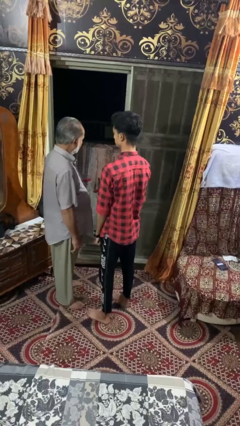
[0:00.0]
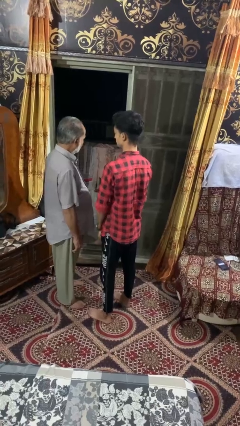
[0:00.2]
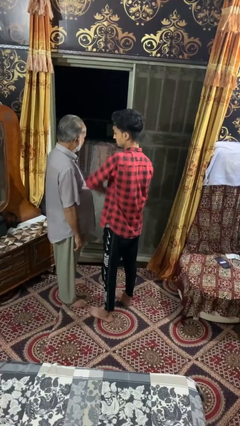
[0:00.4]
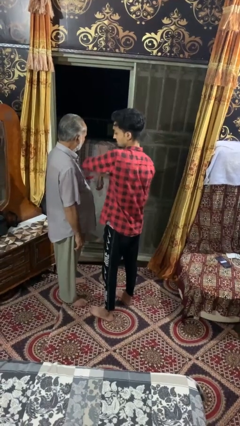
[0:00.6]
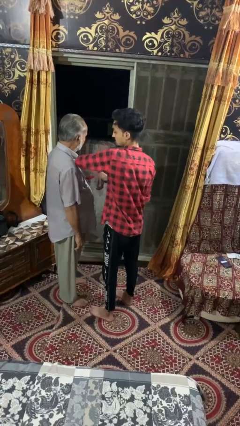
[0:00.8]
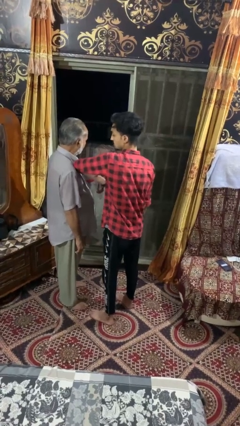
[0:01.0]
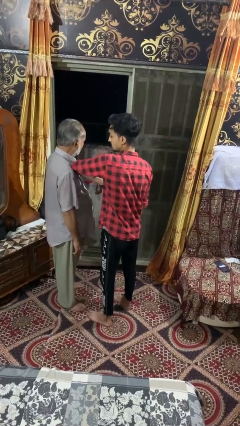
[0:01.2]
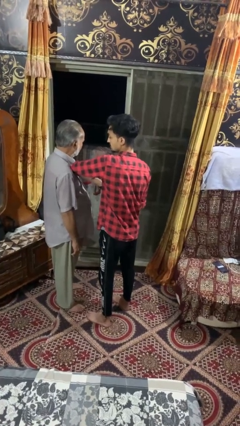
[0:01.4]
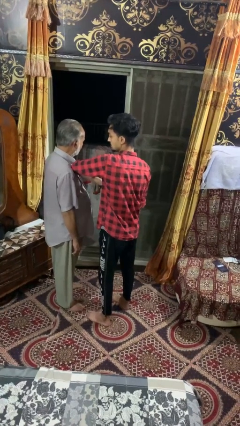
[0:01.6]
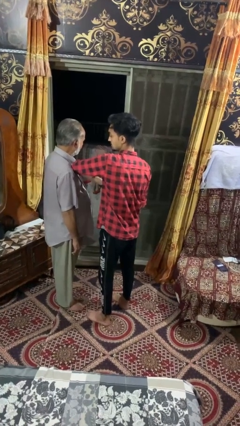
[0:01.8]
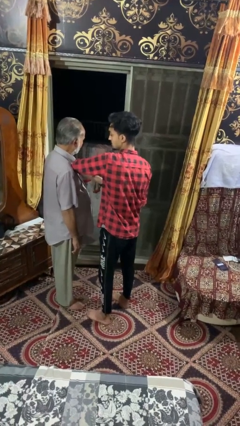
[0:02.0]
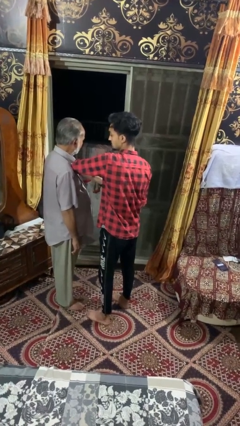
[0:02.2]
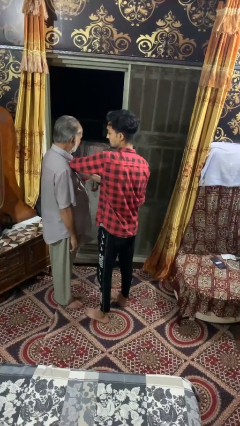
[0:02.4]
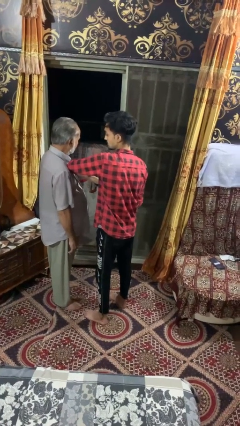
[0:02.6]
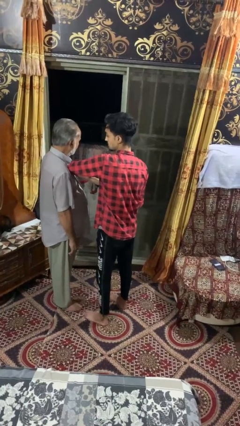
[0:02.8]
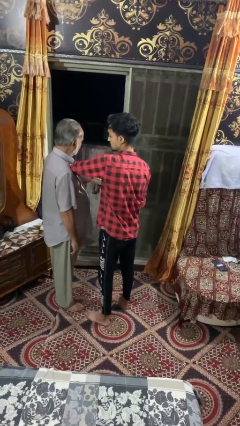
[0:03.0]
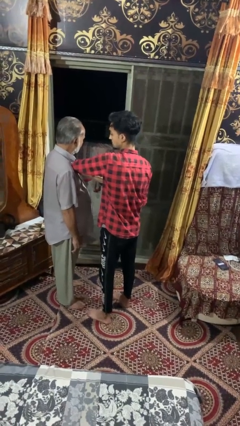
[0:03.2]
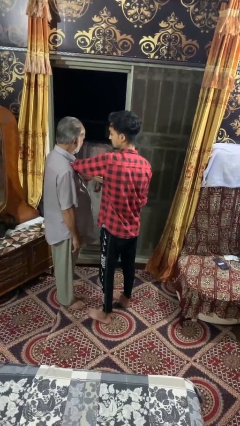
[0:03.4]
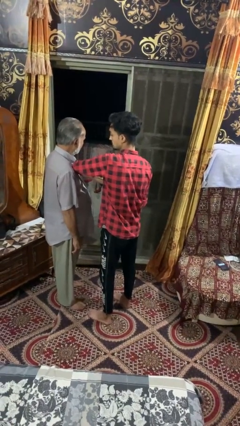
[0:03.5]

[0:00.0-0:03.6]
person nudges person with elbow

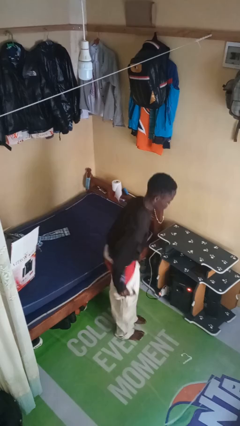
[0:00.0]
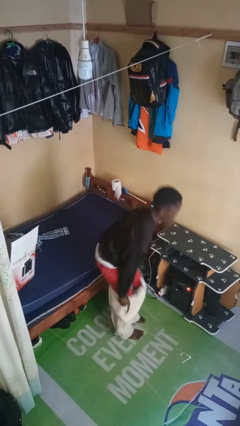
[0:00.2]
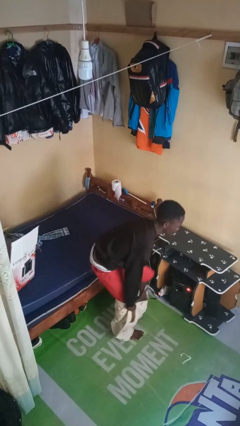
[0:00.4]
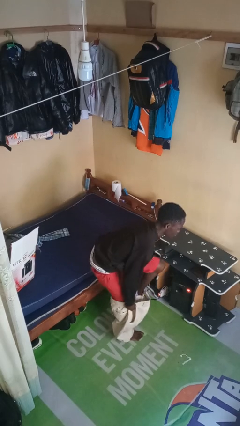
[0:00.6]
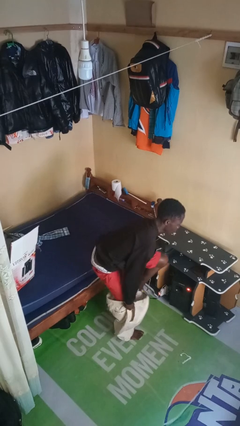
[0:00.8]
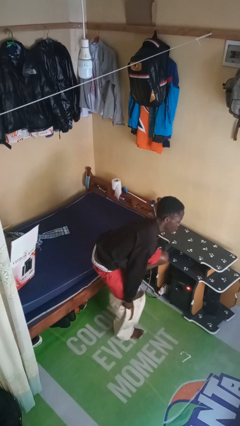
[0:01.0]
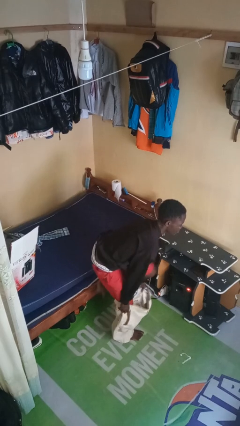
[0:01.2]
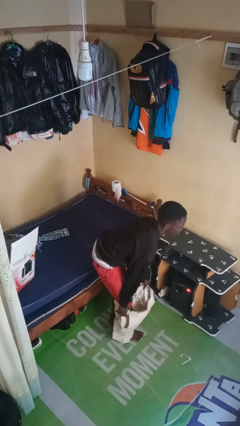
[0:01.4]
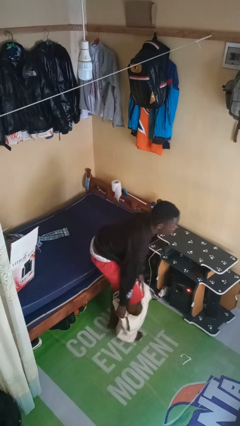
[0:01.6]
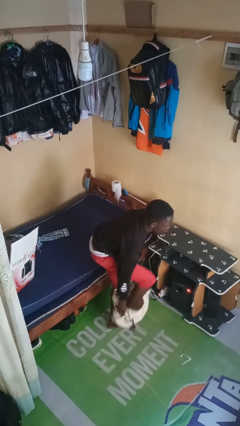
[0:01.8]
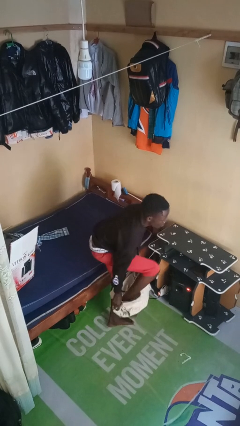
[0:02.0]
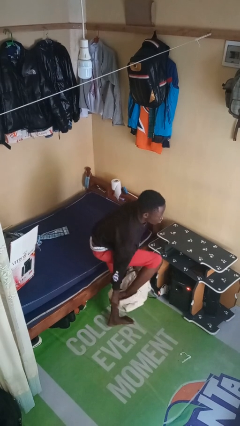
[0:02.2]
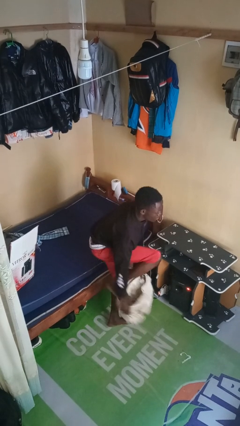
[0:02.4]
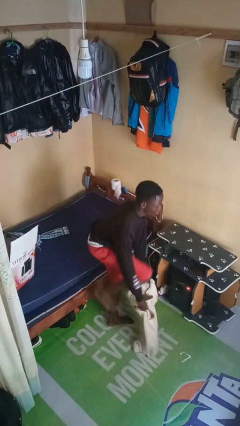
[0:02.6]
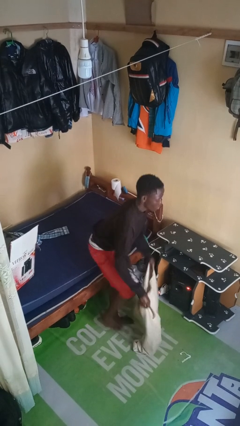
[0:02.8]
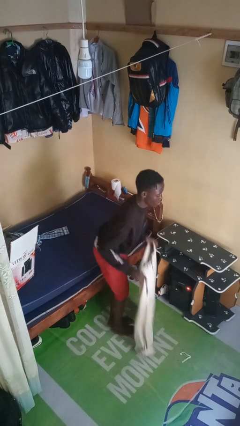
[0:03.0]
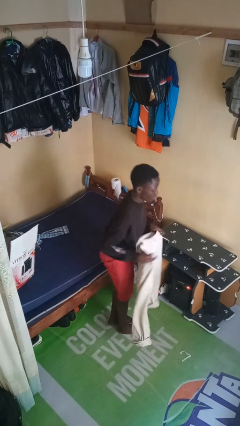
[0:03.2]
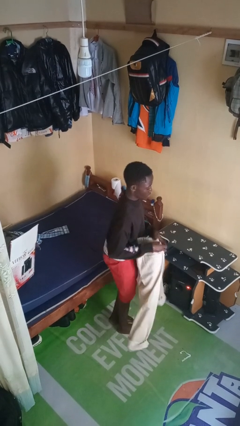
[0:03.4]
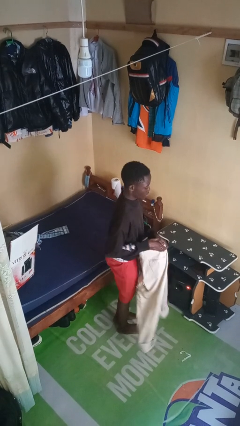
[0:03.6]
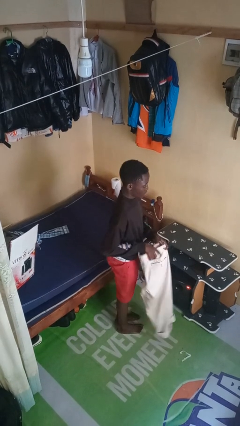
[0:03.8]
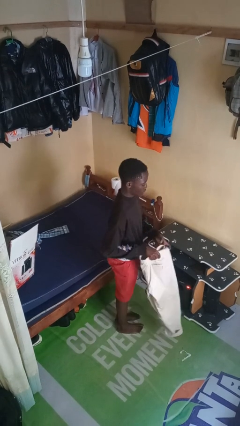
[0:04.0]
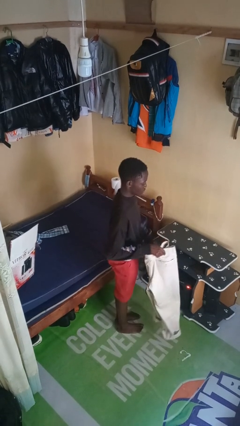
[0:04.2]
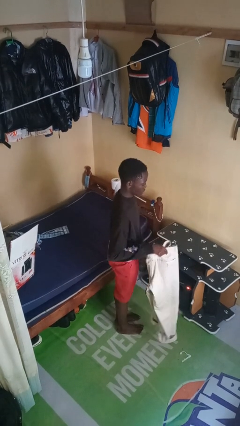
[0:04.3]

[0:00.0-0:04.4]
person takes off pants

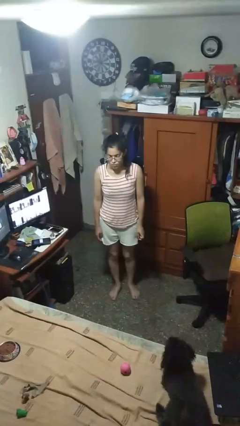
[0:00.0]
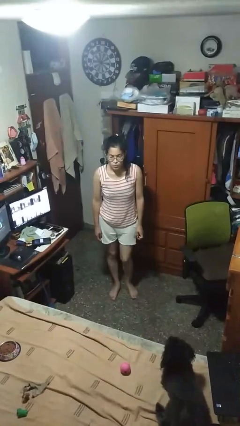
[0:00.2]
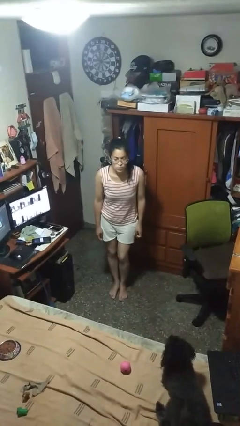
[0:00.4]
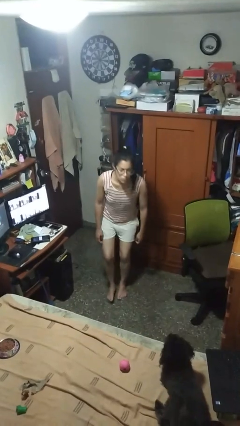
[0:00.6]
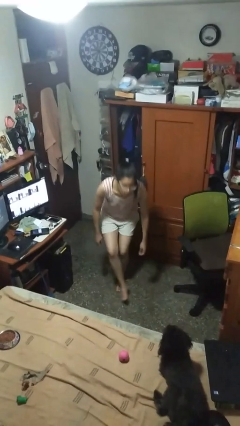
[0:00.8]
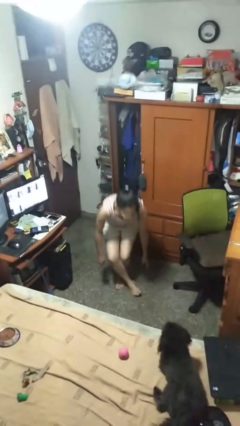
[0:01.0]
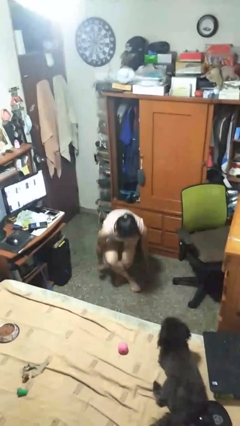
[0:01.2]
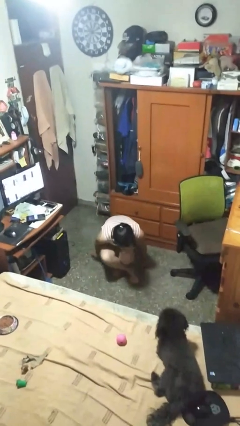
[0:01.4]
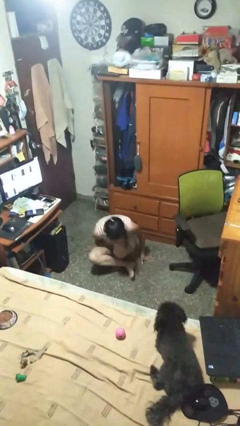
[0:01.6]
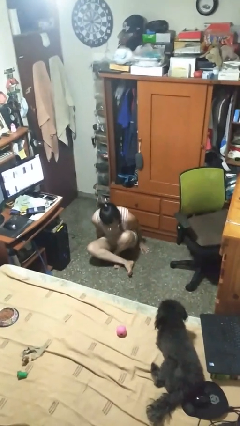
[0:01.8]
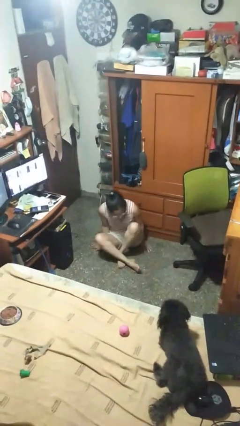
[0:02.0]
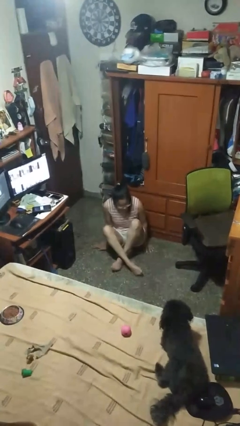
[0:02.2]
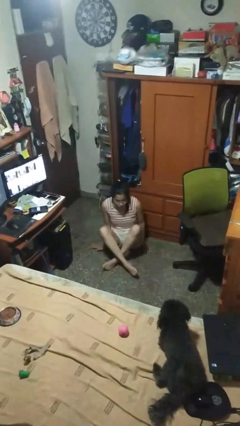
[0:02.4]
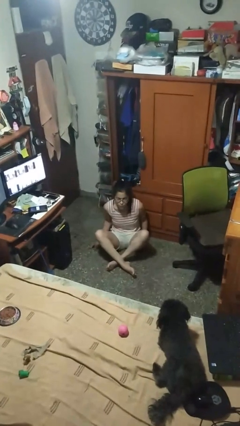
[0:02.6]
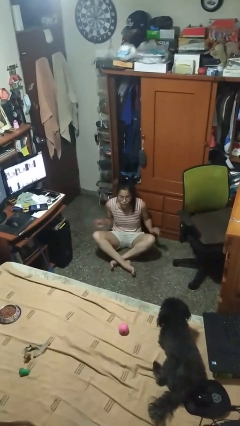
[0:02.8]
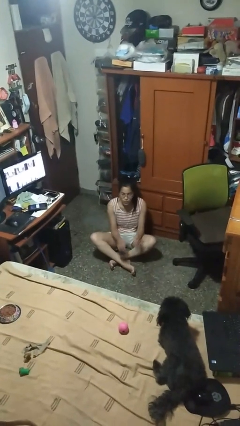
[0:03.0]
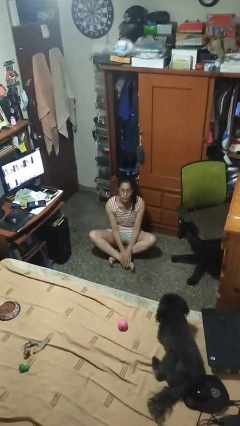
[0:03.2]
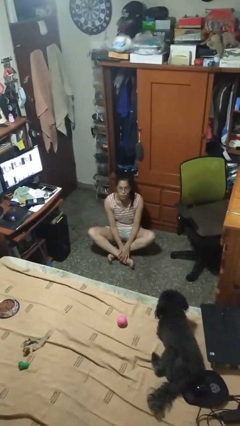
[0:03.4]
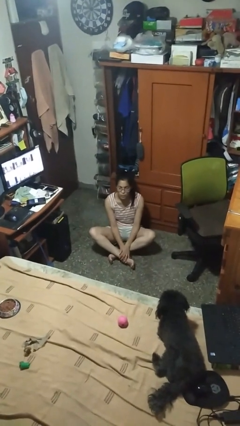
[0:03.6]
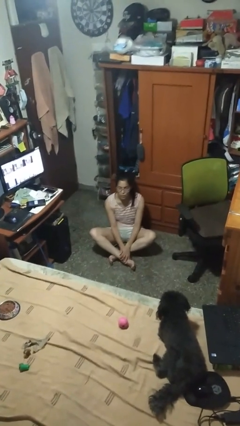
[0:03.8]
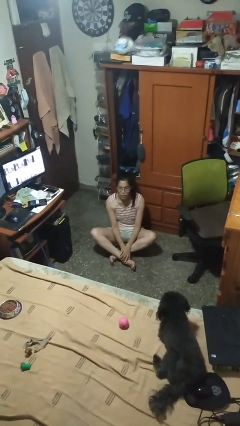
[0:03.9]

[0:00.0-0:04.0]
person sits crisscross

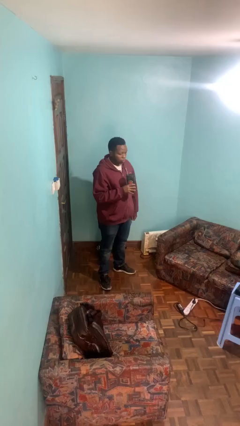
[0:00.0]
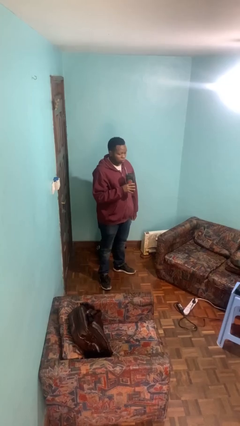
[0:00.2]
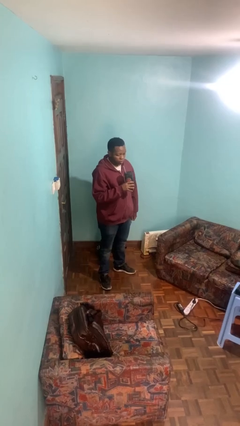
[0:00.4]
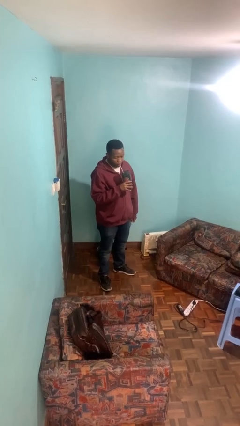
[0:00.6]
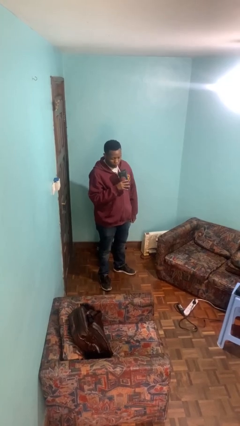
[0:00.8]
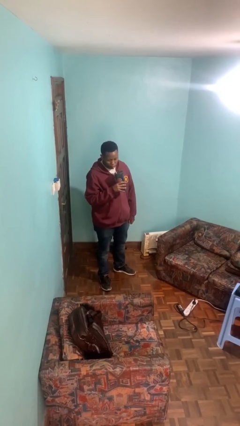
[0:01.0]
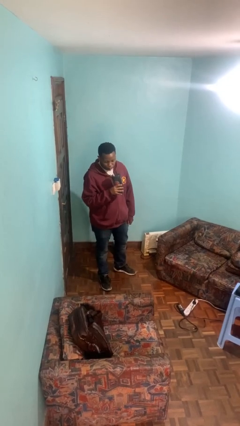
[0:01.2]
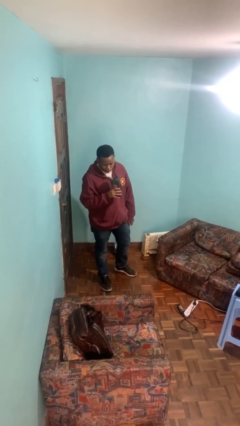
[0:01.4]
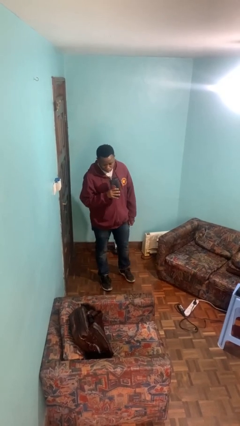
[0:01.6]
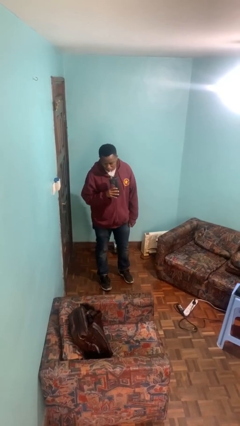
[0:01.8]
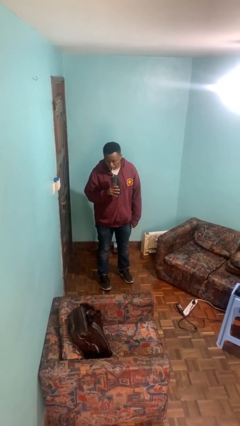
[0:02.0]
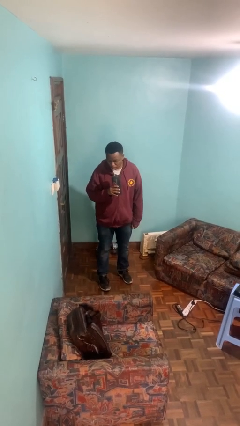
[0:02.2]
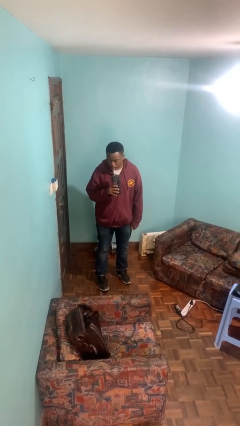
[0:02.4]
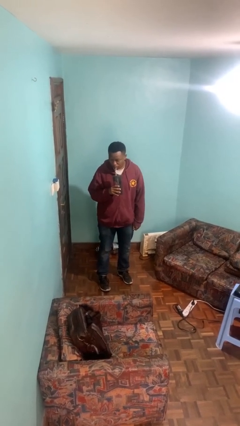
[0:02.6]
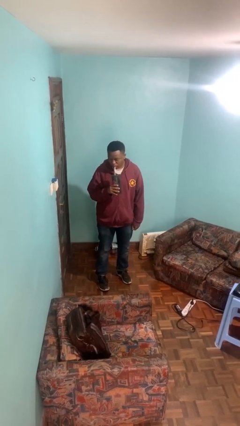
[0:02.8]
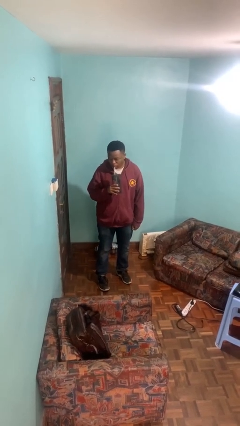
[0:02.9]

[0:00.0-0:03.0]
person drinks from straw

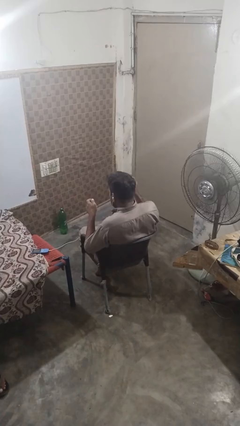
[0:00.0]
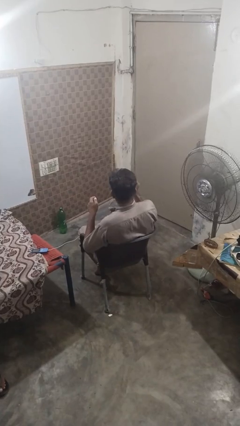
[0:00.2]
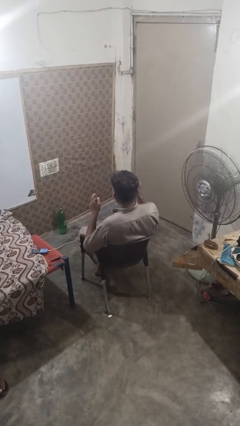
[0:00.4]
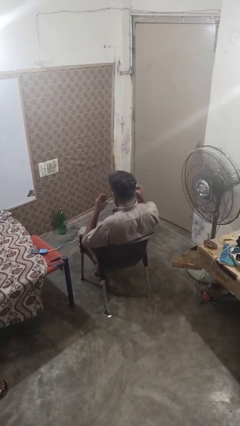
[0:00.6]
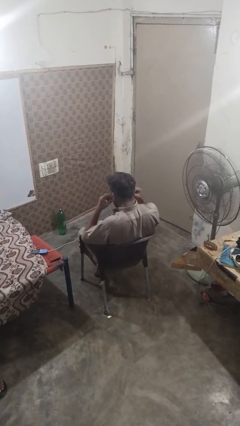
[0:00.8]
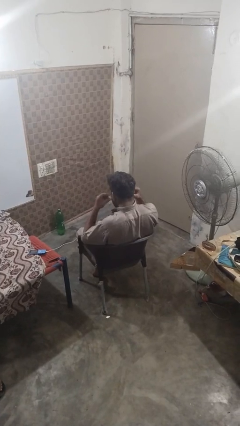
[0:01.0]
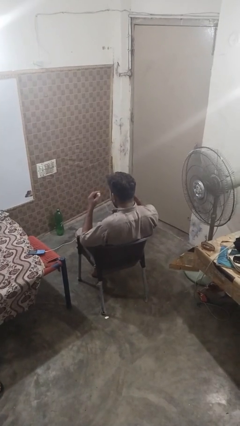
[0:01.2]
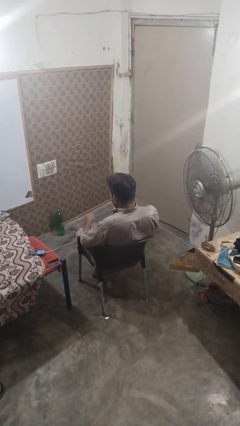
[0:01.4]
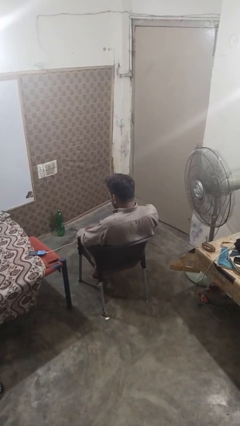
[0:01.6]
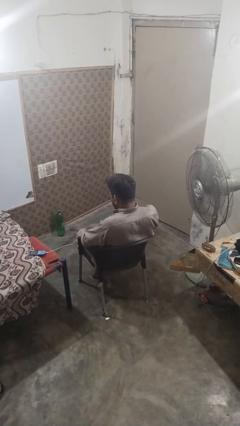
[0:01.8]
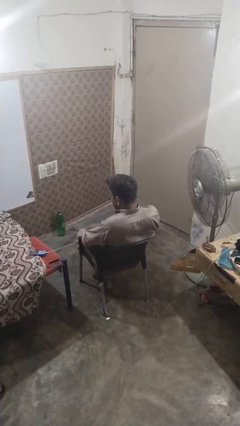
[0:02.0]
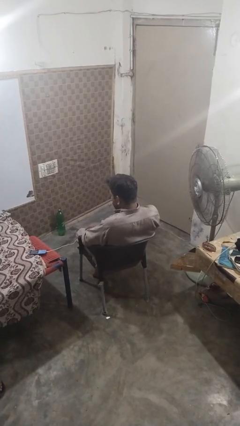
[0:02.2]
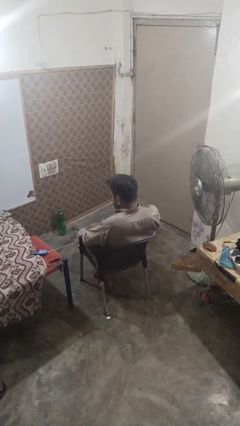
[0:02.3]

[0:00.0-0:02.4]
person takes off headphones

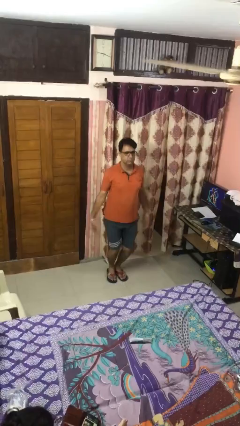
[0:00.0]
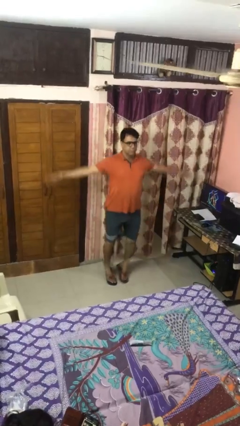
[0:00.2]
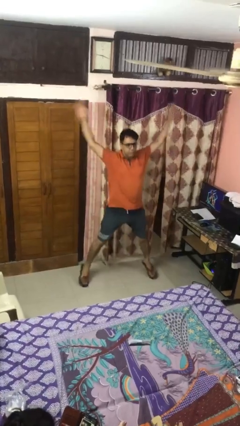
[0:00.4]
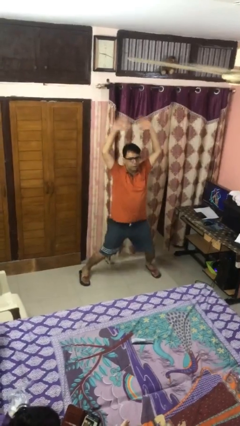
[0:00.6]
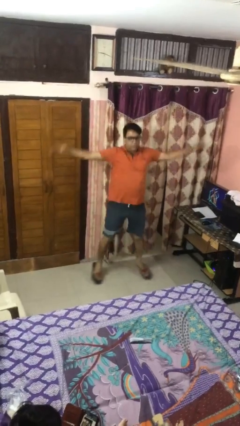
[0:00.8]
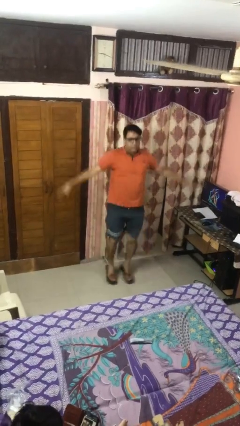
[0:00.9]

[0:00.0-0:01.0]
person exercises with jumping jacks
